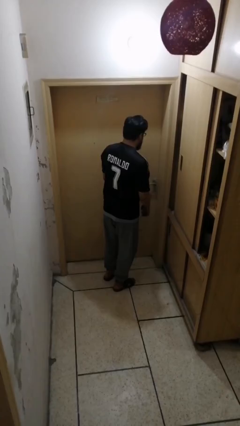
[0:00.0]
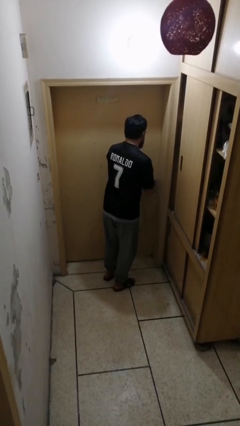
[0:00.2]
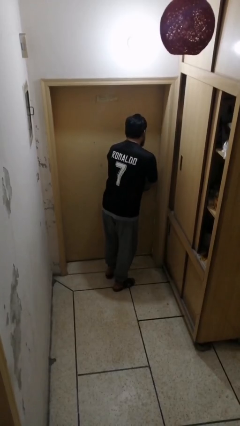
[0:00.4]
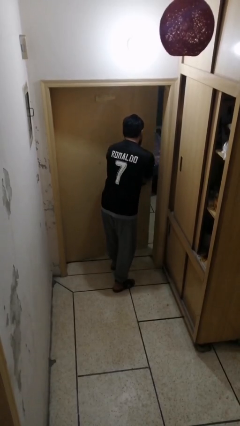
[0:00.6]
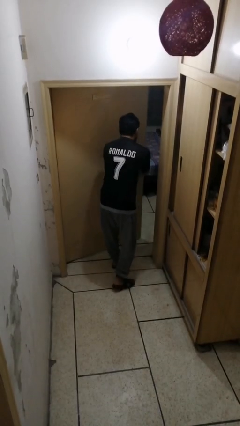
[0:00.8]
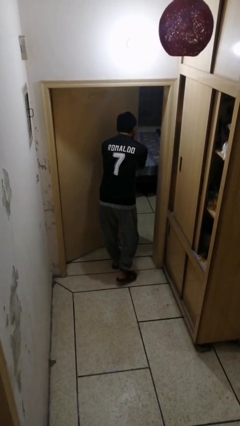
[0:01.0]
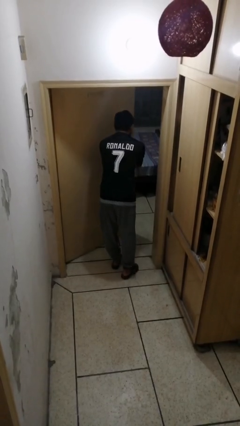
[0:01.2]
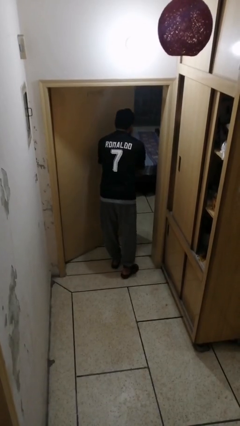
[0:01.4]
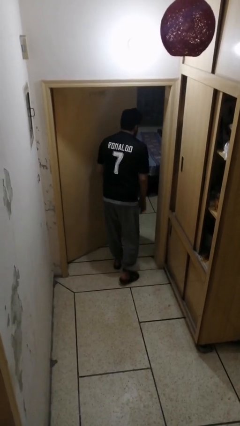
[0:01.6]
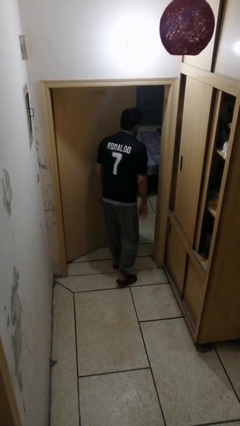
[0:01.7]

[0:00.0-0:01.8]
person opens facility door

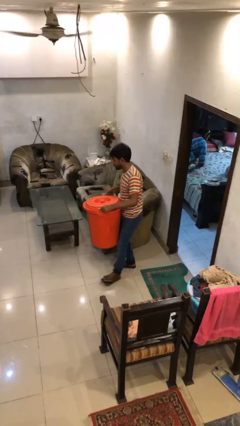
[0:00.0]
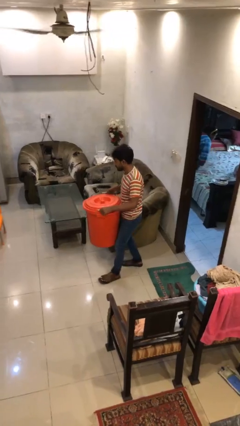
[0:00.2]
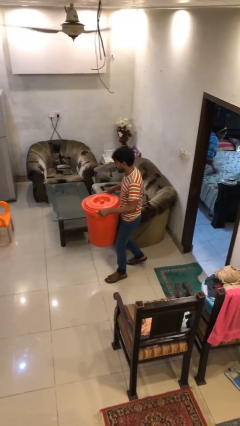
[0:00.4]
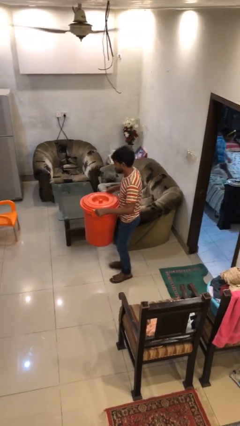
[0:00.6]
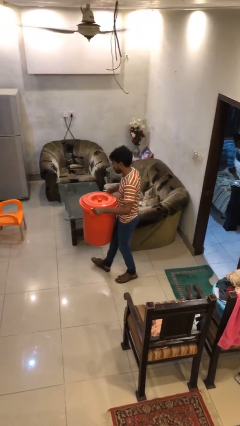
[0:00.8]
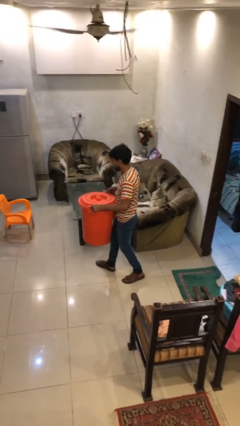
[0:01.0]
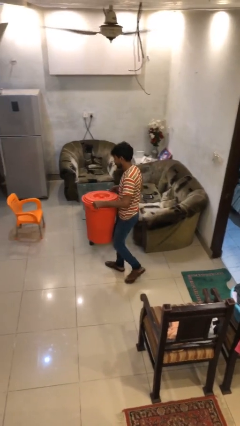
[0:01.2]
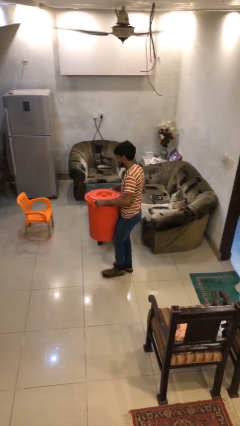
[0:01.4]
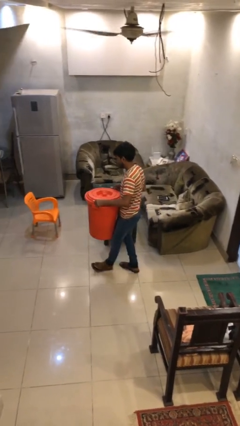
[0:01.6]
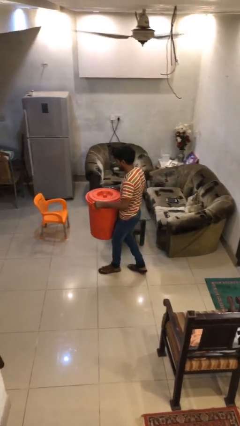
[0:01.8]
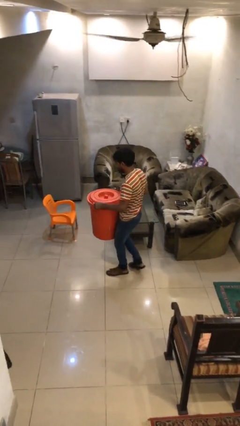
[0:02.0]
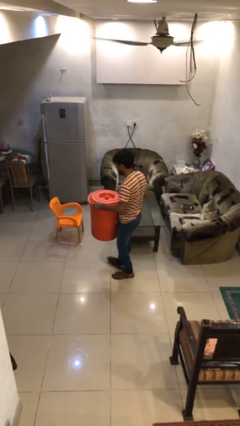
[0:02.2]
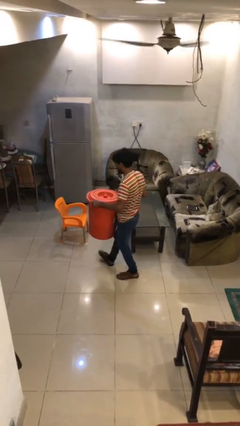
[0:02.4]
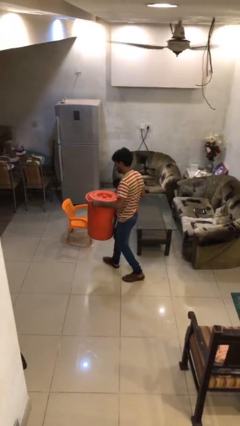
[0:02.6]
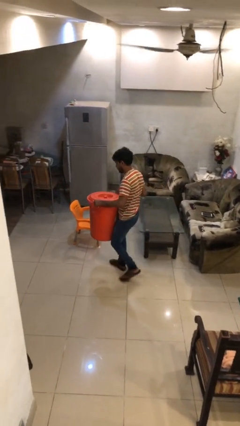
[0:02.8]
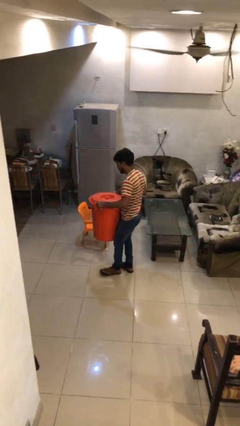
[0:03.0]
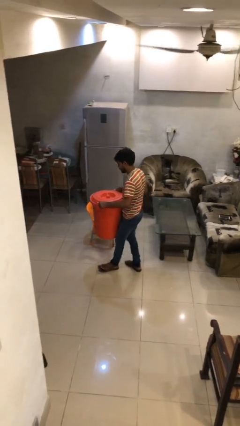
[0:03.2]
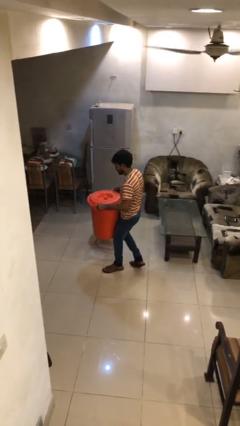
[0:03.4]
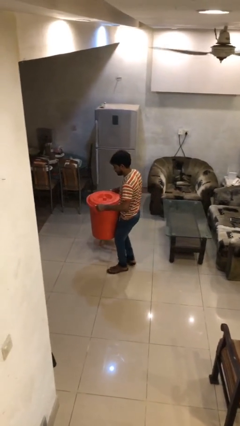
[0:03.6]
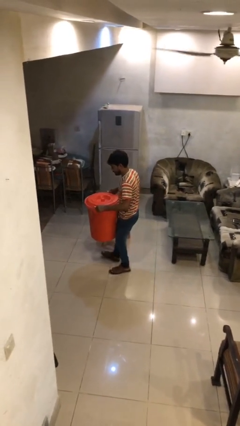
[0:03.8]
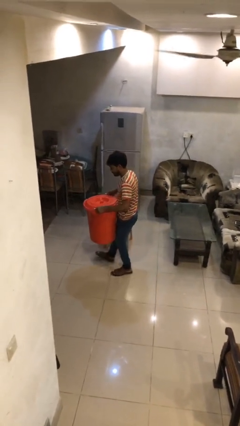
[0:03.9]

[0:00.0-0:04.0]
person carries heavy object

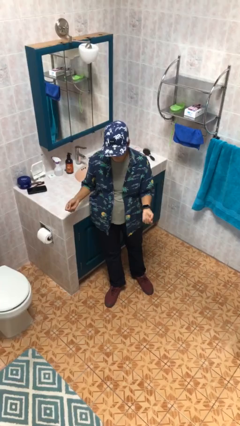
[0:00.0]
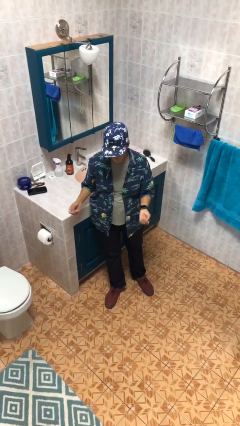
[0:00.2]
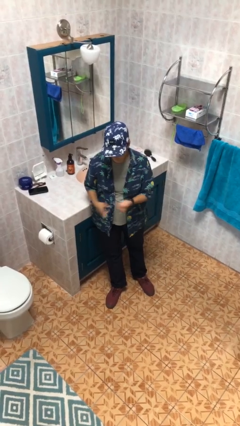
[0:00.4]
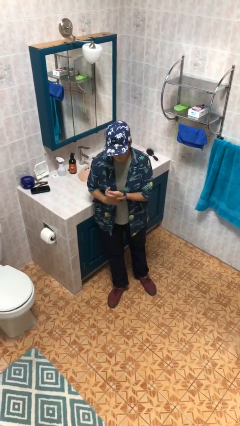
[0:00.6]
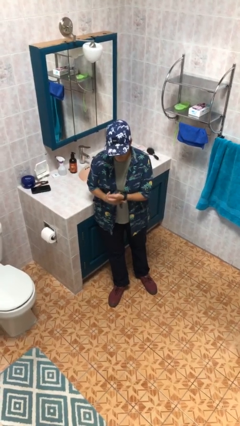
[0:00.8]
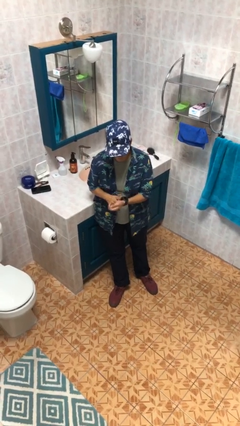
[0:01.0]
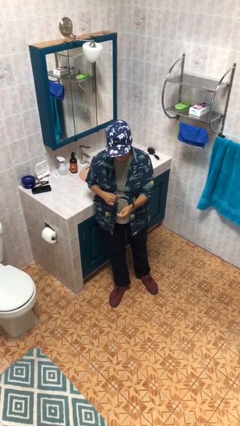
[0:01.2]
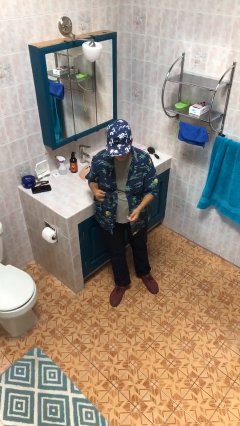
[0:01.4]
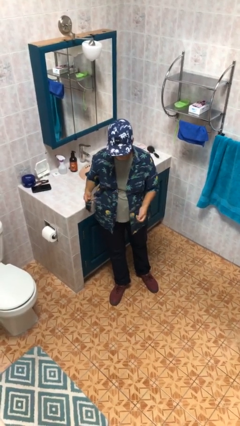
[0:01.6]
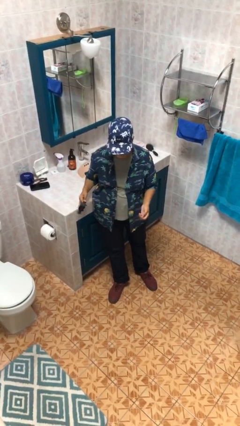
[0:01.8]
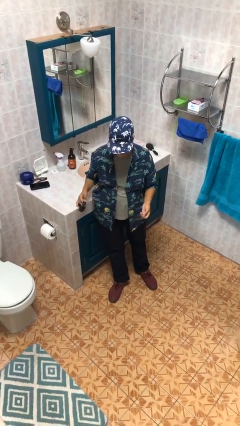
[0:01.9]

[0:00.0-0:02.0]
person takes off wristwatch

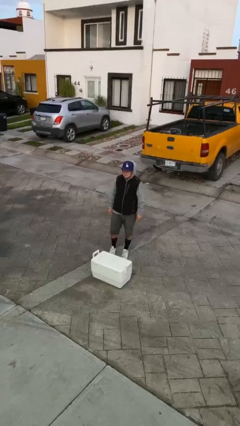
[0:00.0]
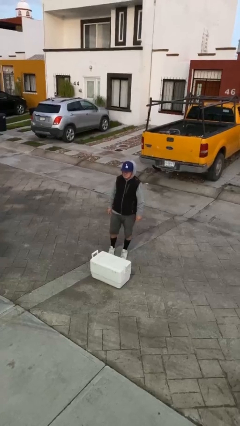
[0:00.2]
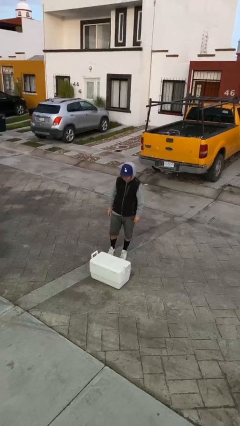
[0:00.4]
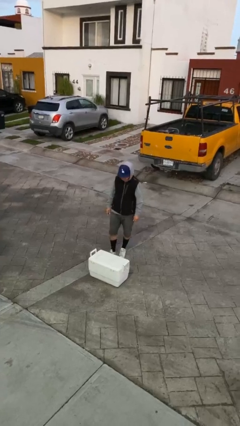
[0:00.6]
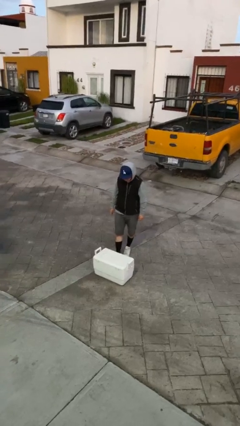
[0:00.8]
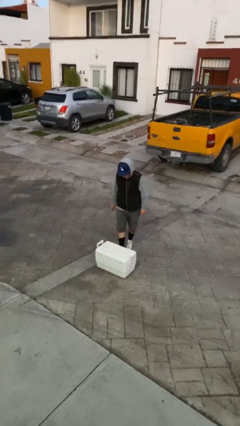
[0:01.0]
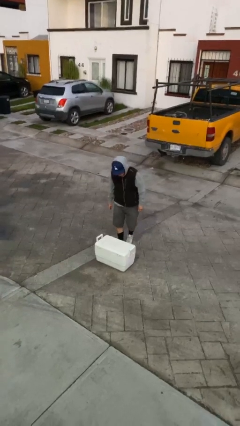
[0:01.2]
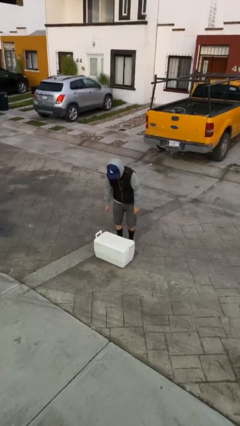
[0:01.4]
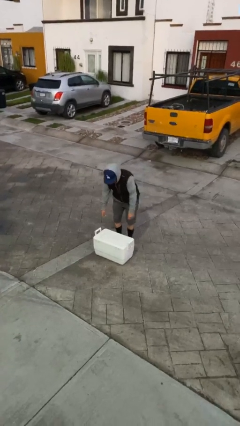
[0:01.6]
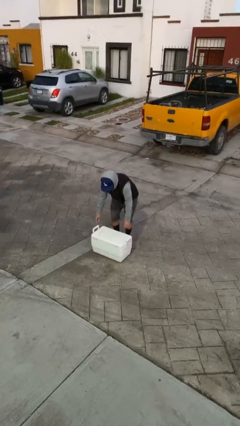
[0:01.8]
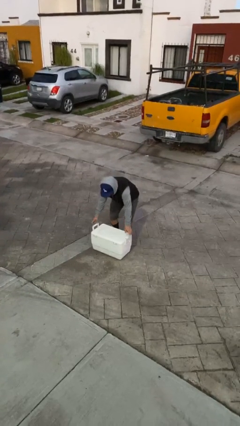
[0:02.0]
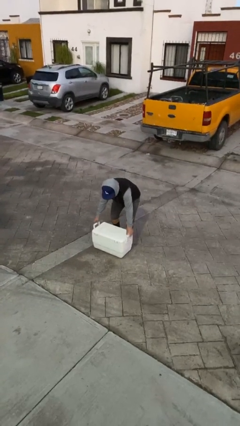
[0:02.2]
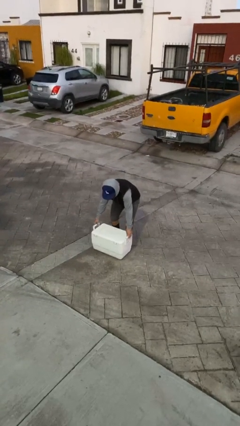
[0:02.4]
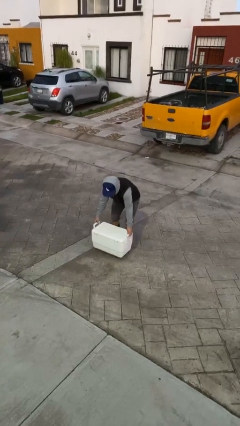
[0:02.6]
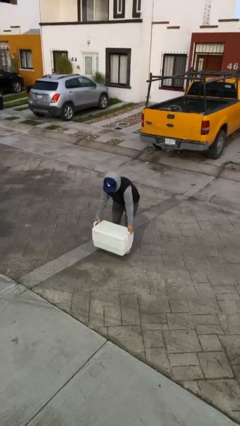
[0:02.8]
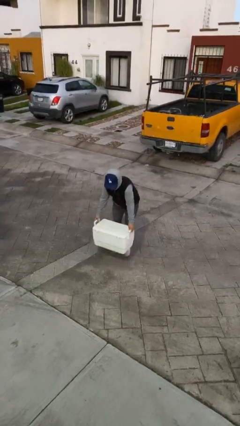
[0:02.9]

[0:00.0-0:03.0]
person picks up object from floor

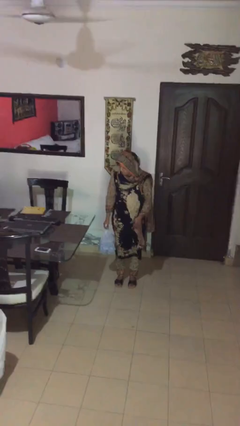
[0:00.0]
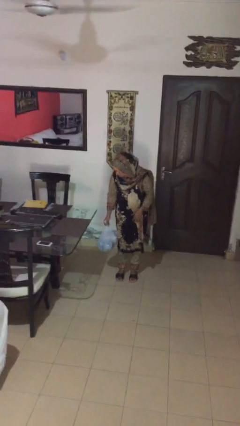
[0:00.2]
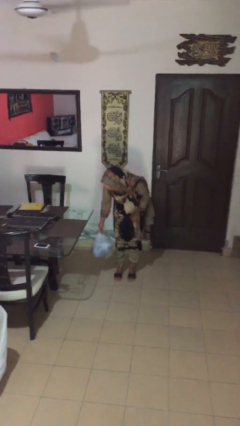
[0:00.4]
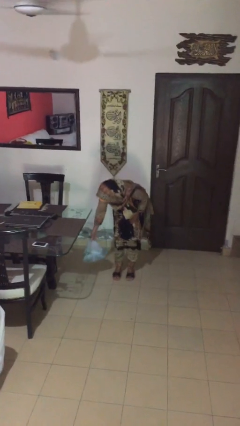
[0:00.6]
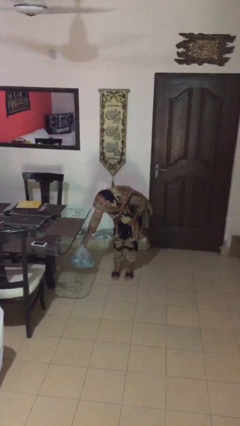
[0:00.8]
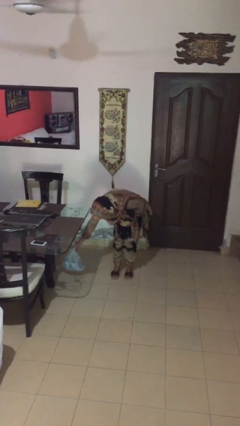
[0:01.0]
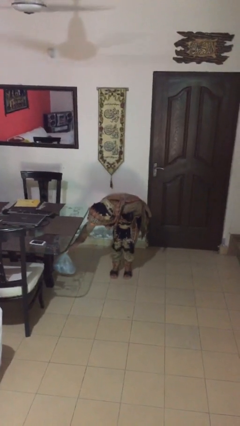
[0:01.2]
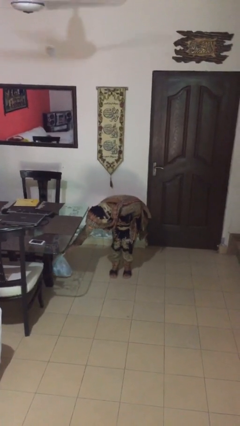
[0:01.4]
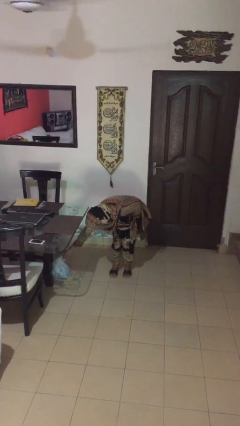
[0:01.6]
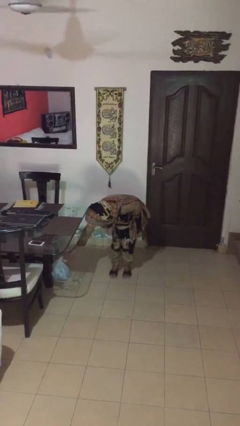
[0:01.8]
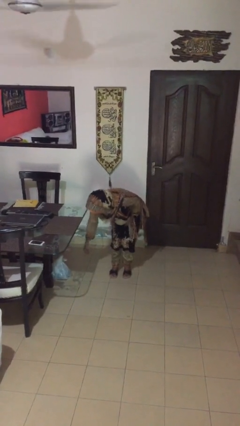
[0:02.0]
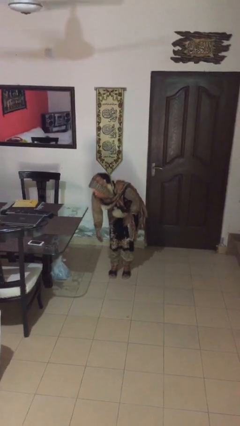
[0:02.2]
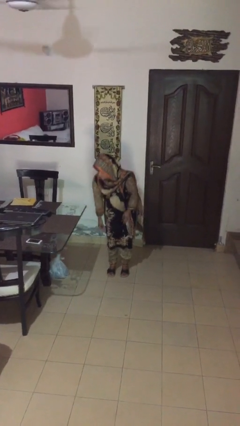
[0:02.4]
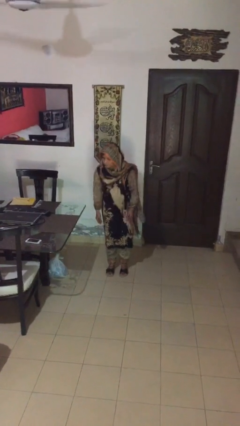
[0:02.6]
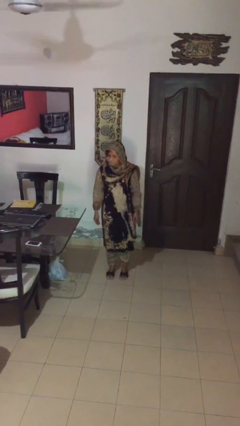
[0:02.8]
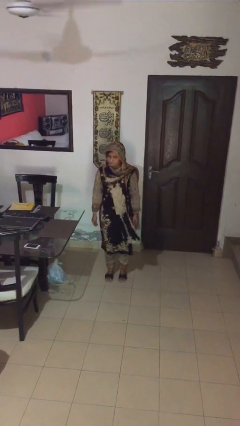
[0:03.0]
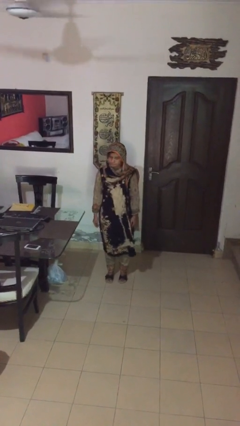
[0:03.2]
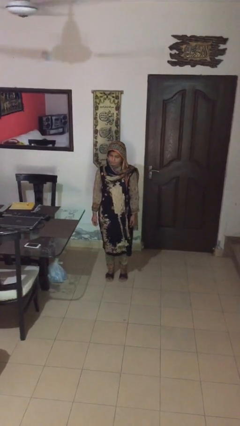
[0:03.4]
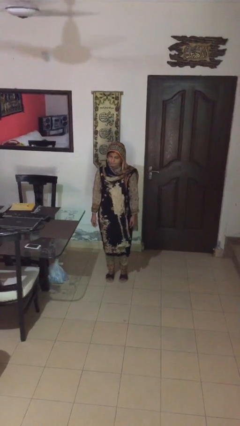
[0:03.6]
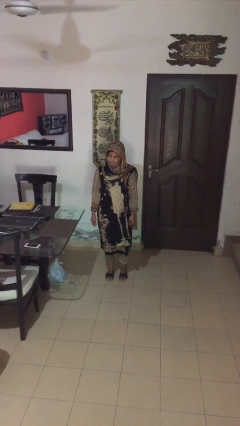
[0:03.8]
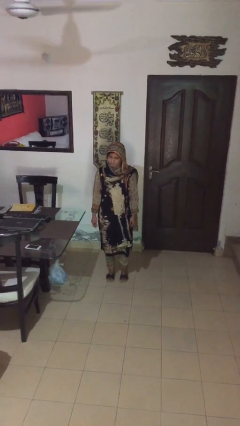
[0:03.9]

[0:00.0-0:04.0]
person puts down object on table

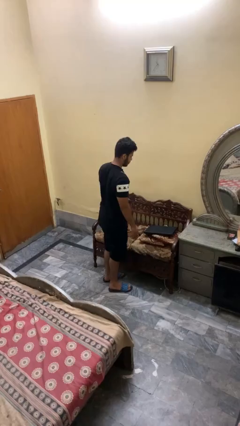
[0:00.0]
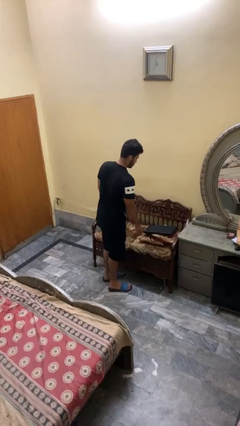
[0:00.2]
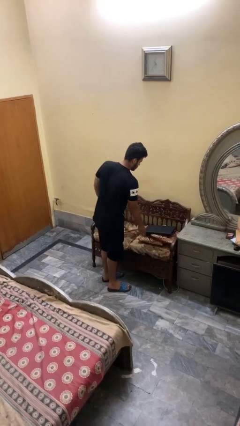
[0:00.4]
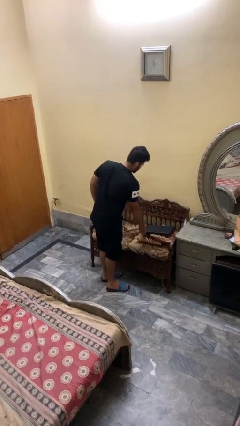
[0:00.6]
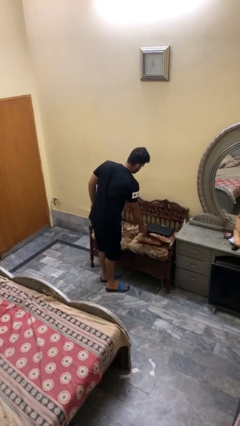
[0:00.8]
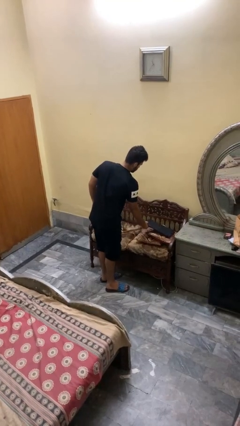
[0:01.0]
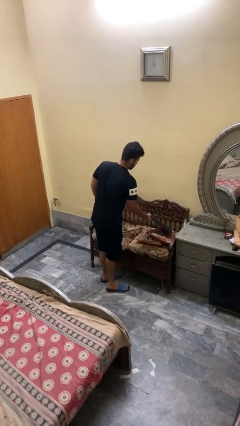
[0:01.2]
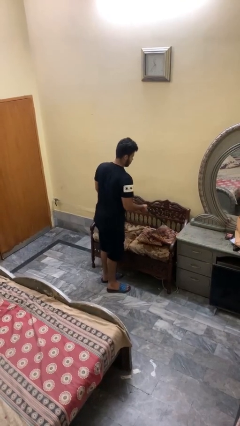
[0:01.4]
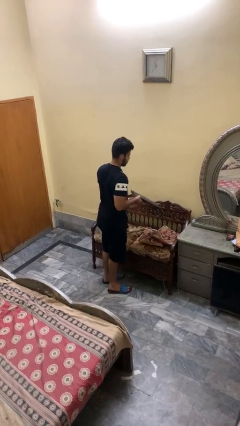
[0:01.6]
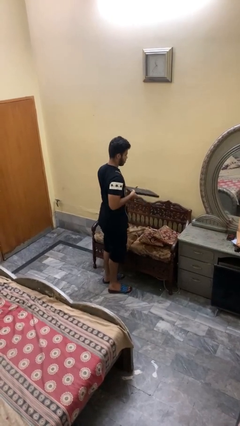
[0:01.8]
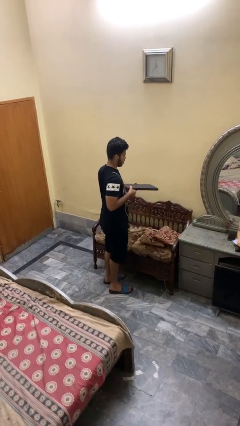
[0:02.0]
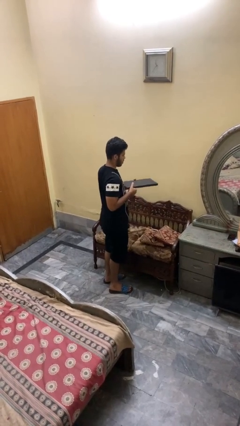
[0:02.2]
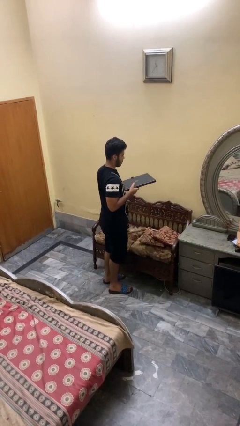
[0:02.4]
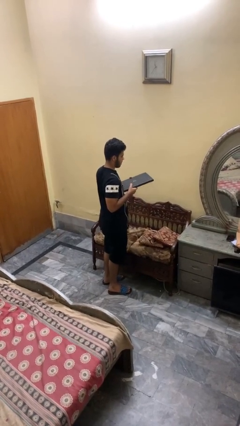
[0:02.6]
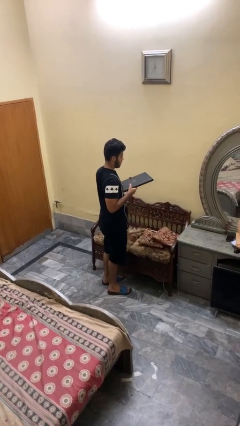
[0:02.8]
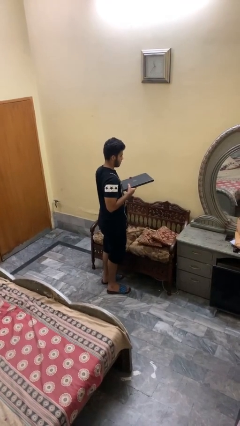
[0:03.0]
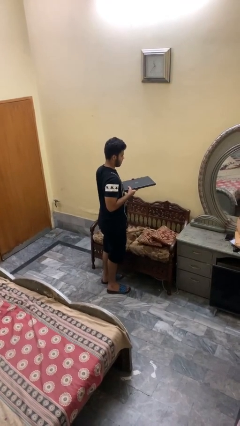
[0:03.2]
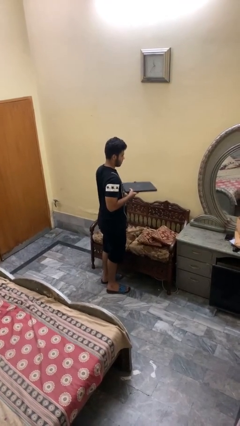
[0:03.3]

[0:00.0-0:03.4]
person picks up object from couch
